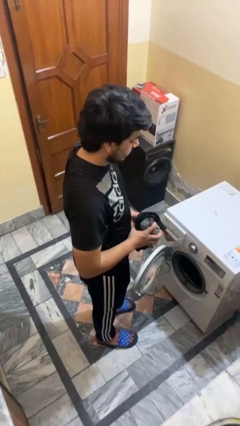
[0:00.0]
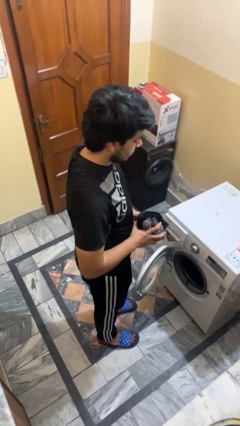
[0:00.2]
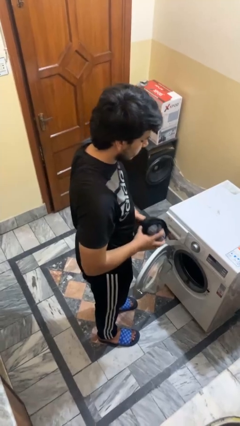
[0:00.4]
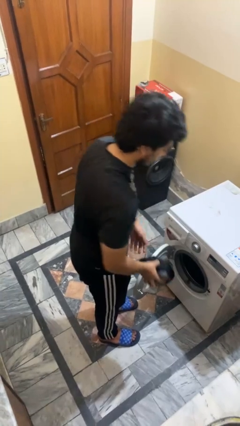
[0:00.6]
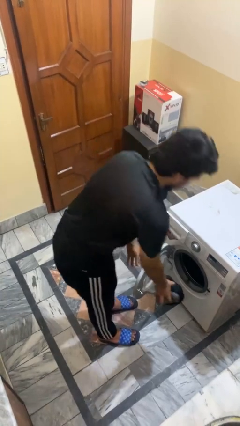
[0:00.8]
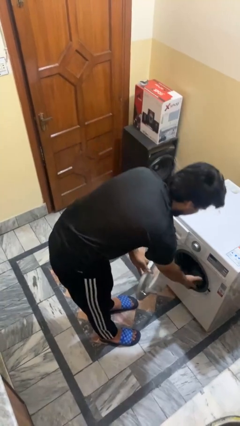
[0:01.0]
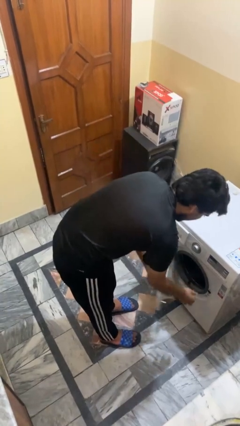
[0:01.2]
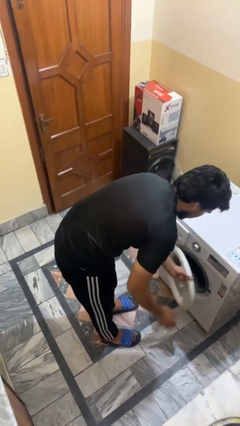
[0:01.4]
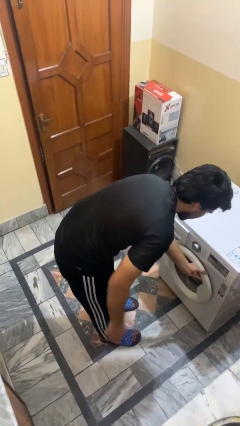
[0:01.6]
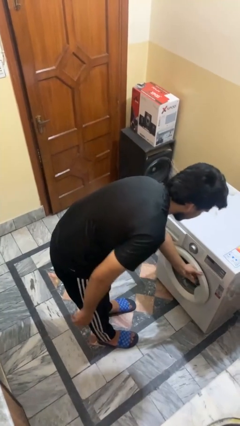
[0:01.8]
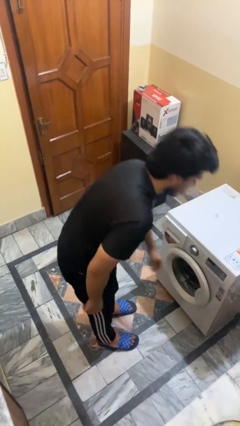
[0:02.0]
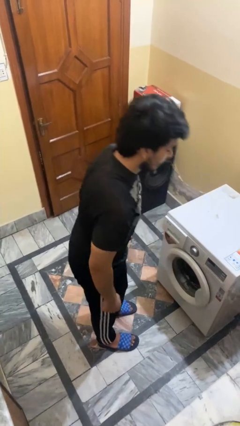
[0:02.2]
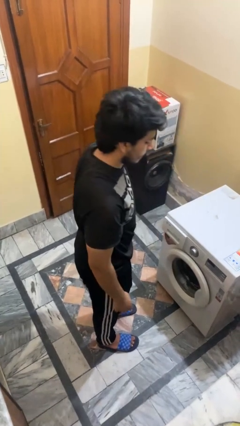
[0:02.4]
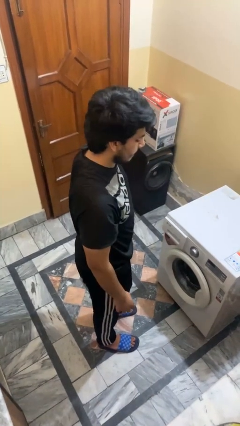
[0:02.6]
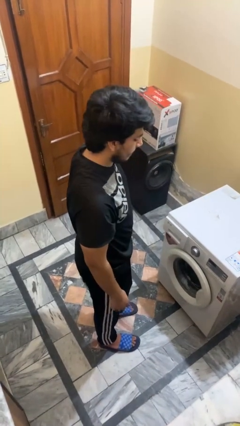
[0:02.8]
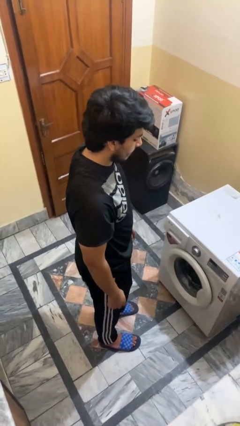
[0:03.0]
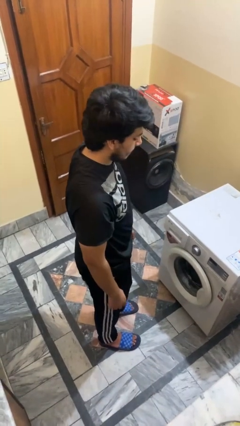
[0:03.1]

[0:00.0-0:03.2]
person loads clotheswasher

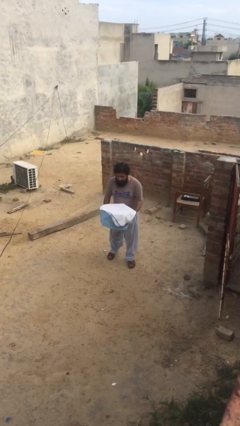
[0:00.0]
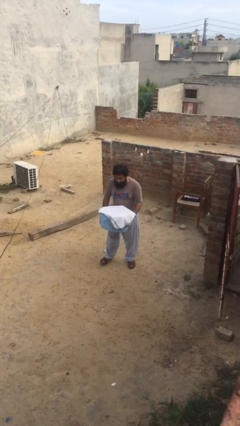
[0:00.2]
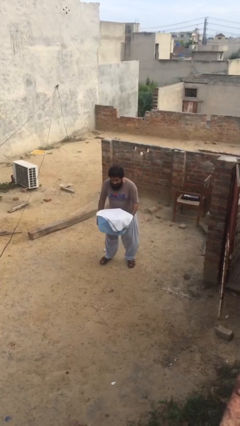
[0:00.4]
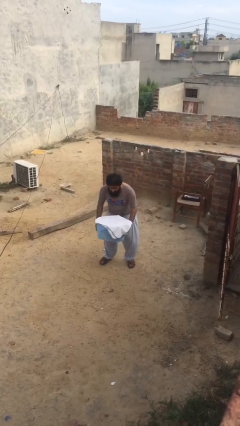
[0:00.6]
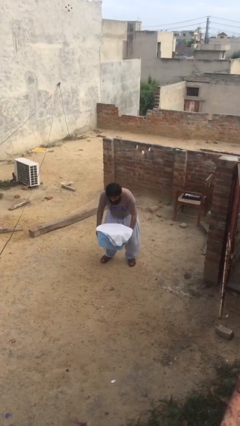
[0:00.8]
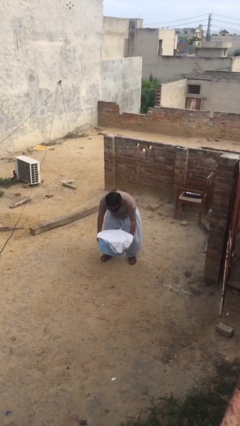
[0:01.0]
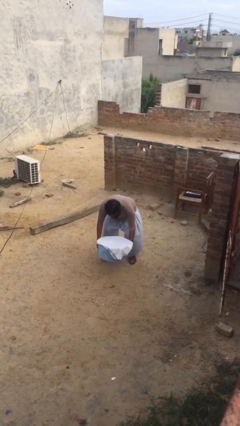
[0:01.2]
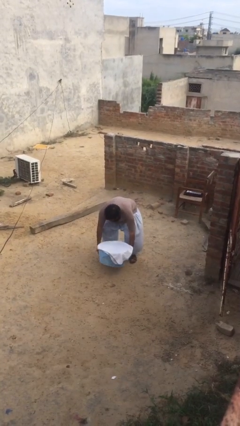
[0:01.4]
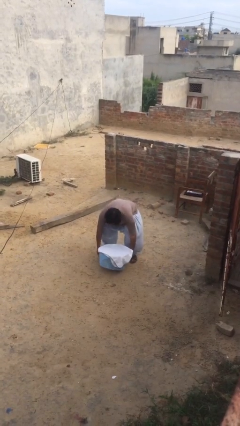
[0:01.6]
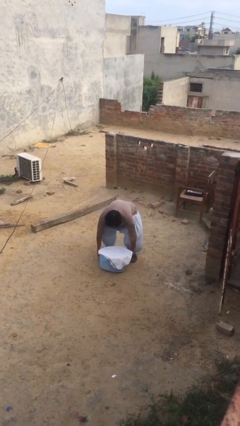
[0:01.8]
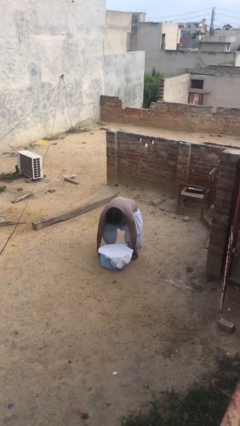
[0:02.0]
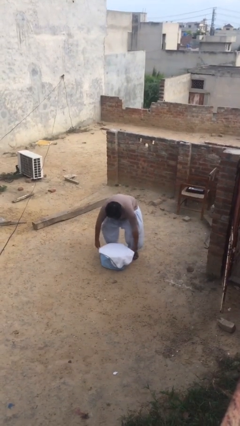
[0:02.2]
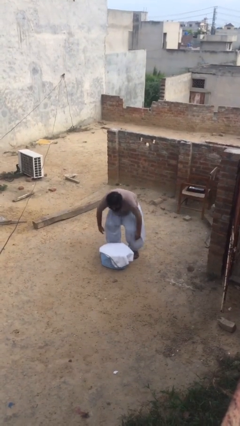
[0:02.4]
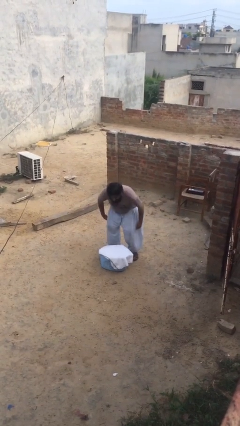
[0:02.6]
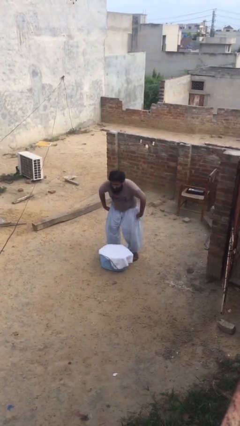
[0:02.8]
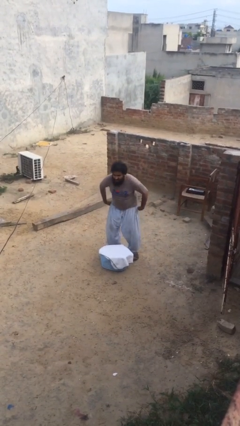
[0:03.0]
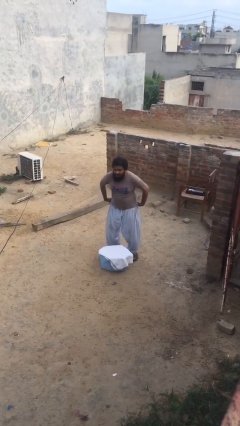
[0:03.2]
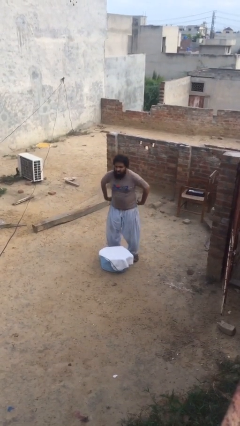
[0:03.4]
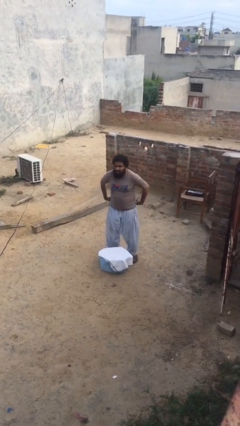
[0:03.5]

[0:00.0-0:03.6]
person puts down object on floor

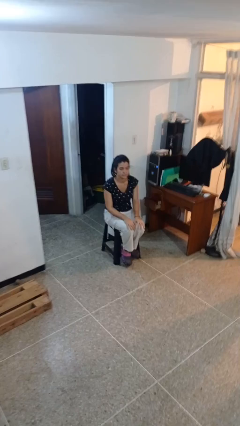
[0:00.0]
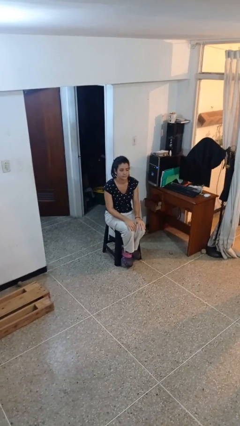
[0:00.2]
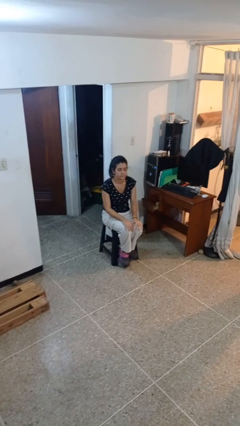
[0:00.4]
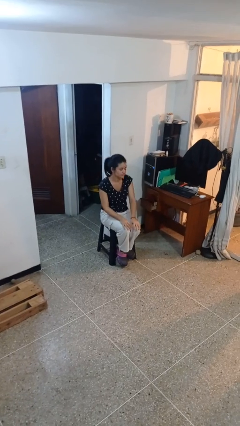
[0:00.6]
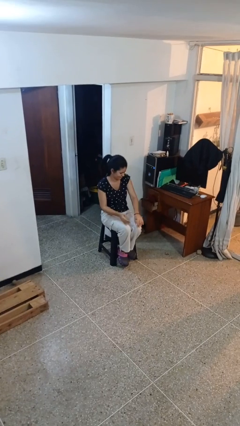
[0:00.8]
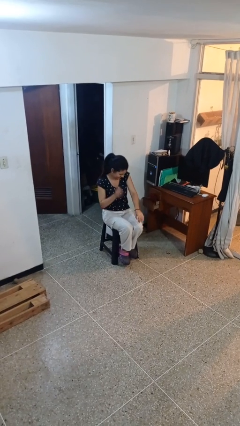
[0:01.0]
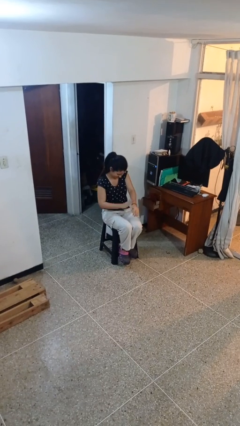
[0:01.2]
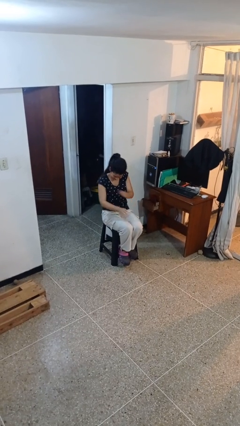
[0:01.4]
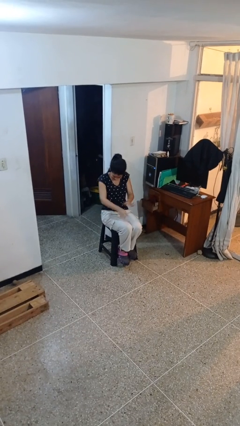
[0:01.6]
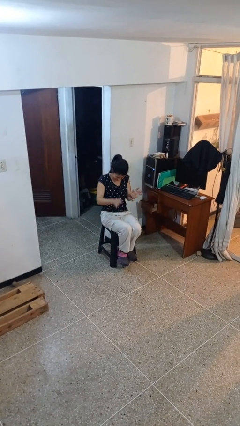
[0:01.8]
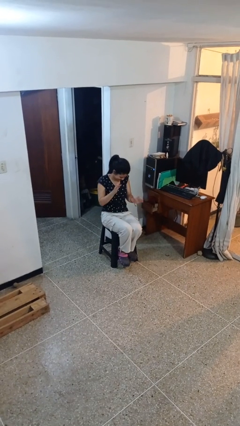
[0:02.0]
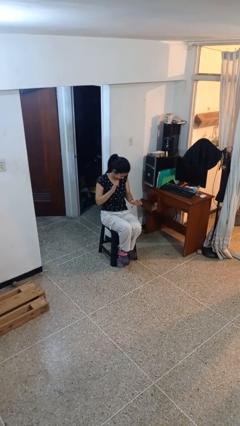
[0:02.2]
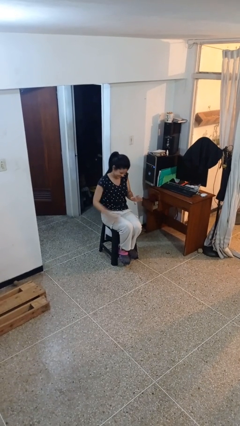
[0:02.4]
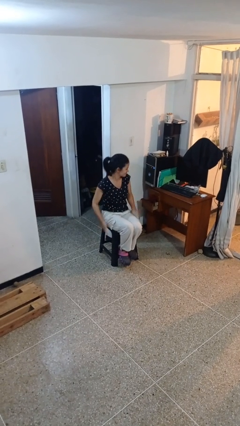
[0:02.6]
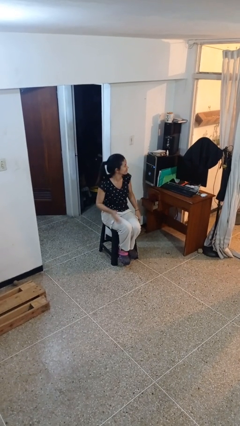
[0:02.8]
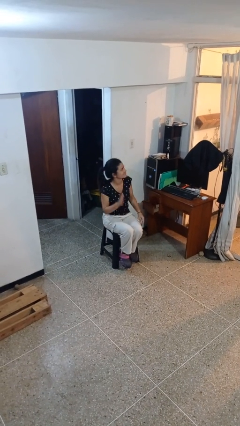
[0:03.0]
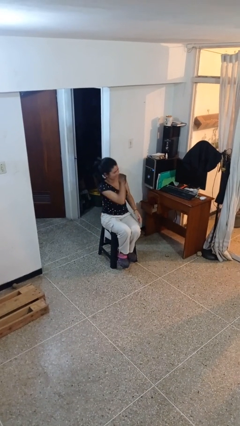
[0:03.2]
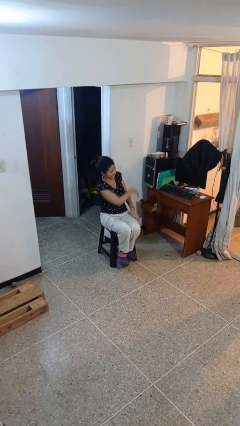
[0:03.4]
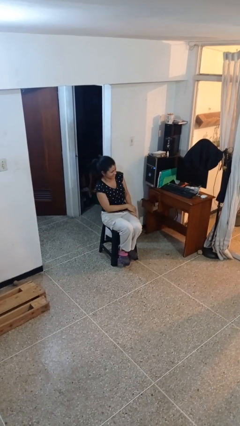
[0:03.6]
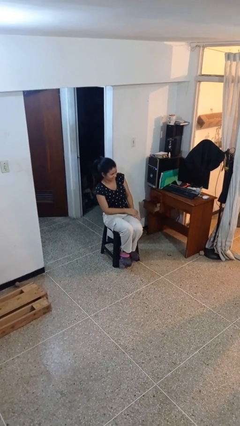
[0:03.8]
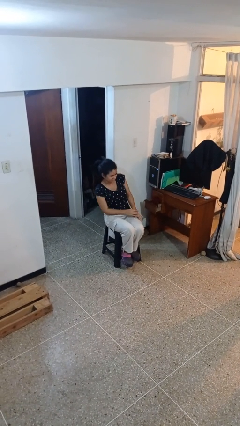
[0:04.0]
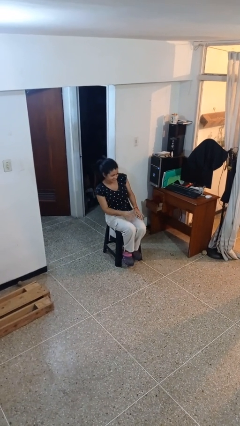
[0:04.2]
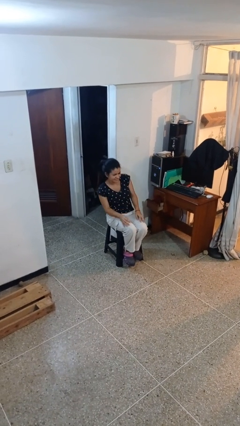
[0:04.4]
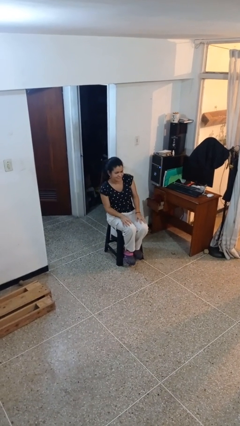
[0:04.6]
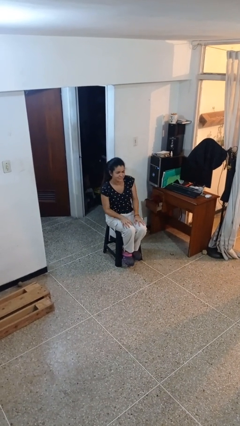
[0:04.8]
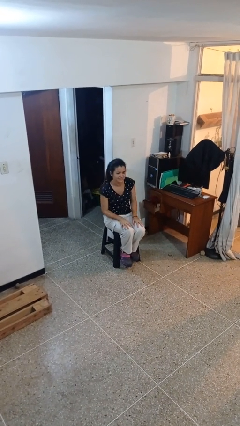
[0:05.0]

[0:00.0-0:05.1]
person swats bug

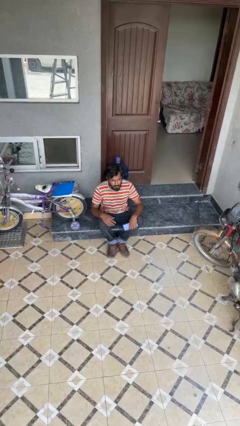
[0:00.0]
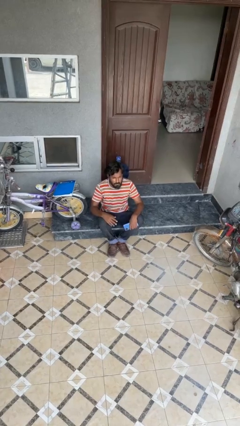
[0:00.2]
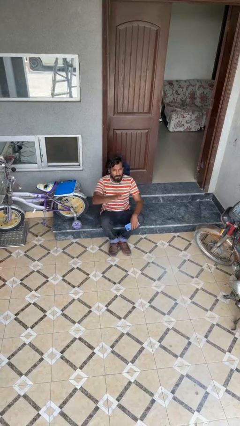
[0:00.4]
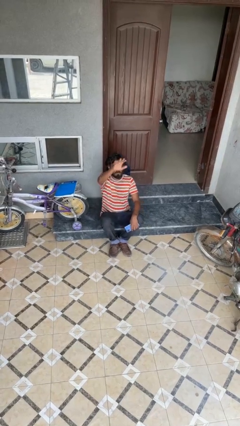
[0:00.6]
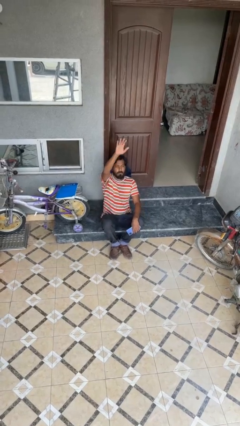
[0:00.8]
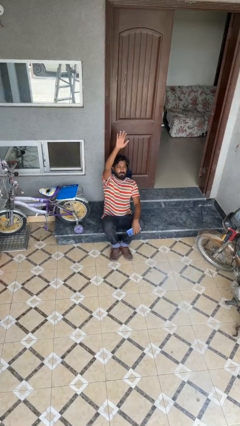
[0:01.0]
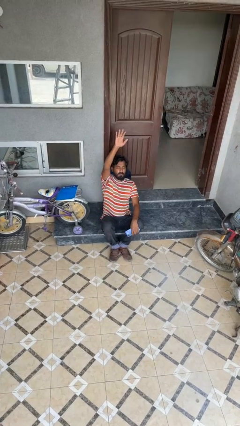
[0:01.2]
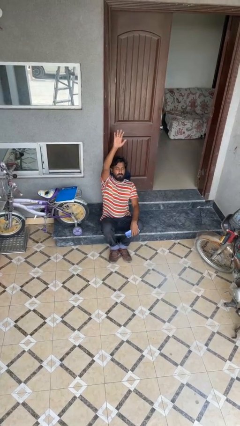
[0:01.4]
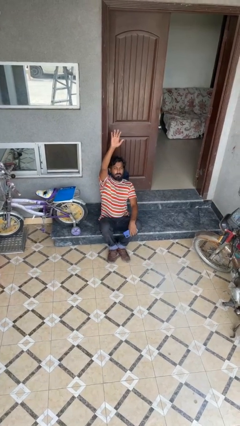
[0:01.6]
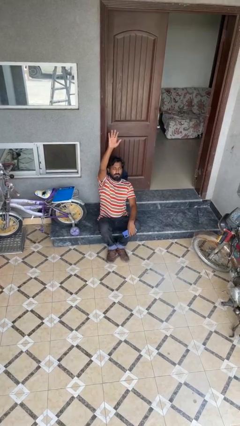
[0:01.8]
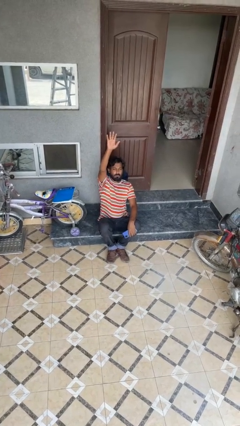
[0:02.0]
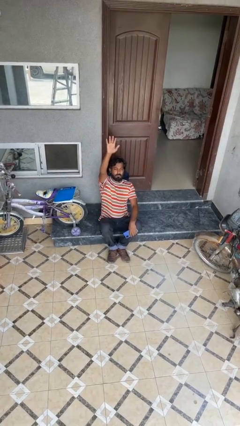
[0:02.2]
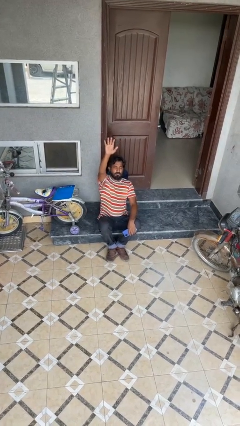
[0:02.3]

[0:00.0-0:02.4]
person gestures raise hand

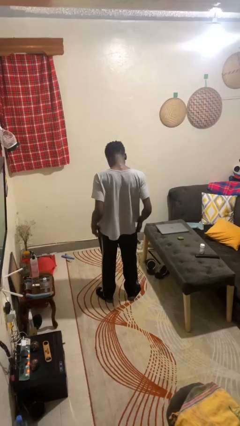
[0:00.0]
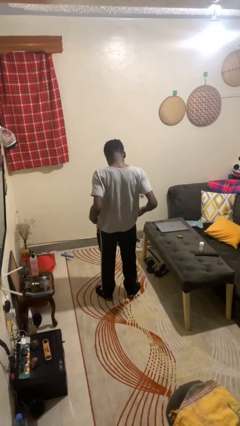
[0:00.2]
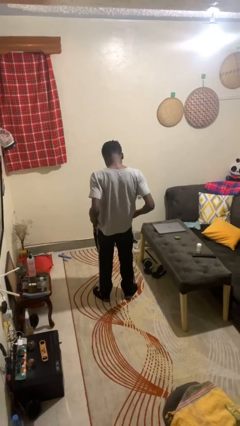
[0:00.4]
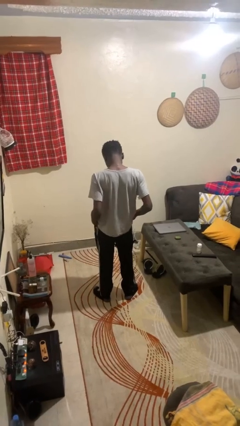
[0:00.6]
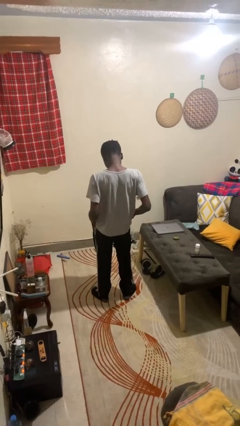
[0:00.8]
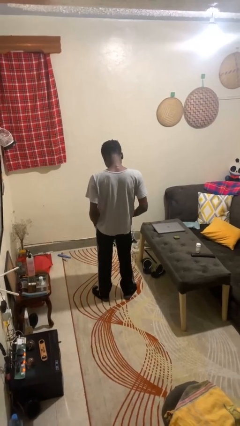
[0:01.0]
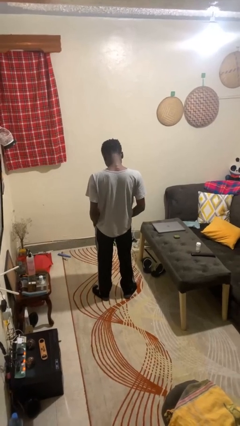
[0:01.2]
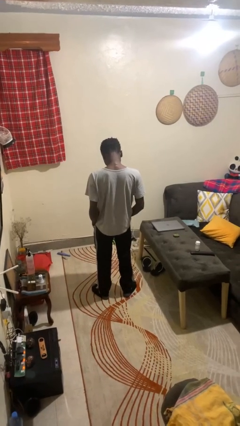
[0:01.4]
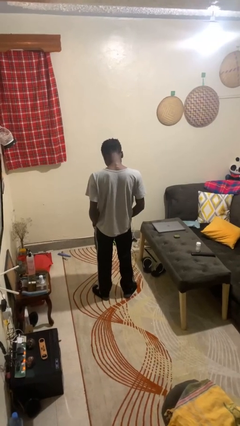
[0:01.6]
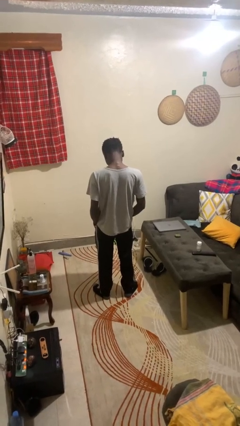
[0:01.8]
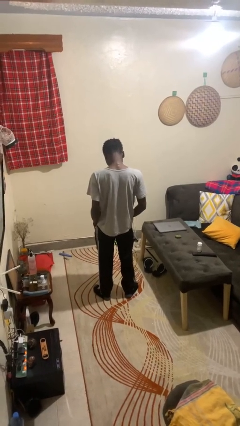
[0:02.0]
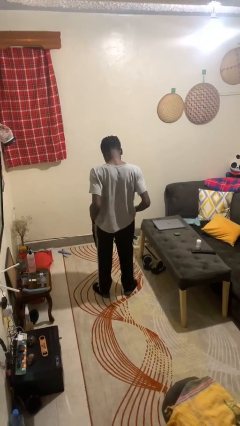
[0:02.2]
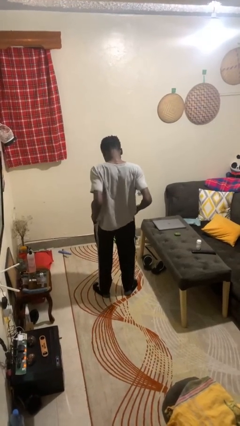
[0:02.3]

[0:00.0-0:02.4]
person puts hands in back pockets

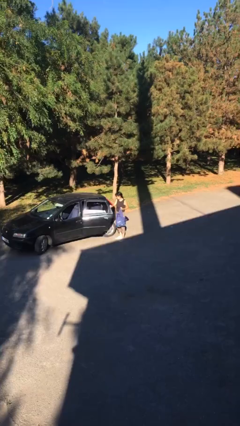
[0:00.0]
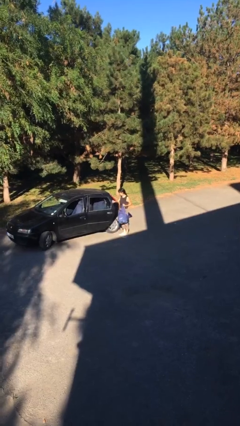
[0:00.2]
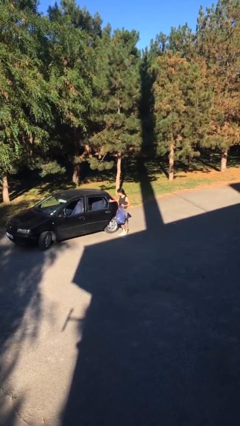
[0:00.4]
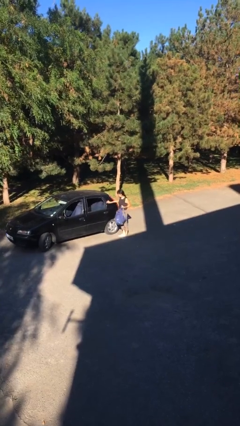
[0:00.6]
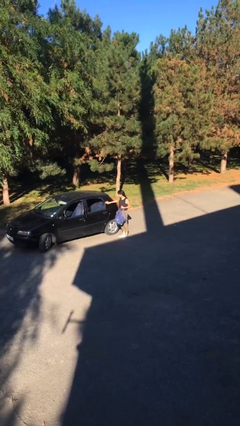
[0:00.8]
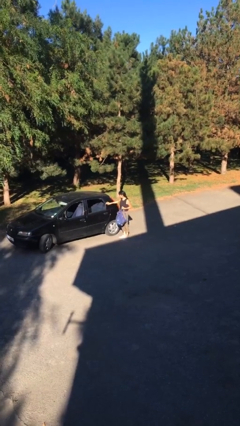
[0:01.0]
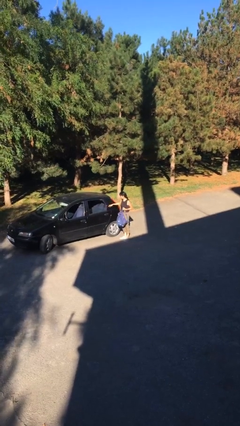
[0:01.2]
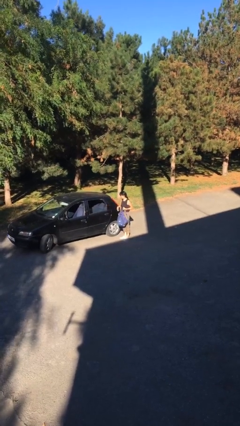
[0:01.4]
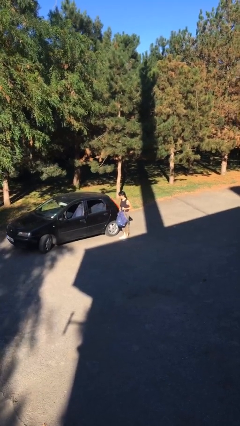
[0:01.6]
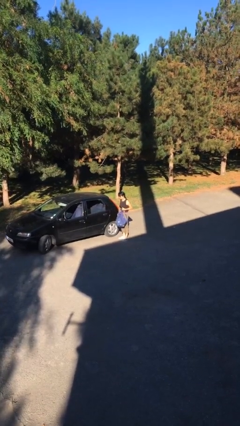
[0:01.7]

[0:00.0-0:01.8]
person closes car door
